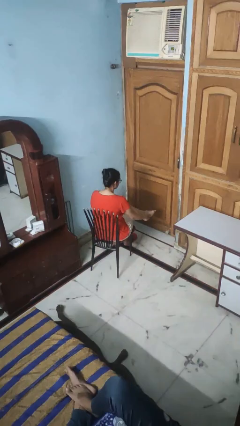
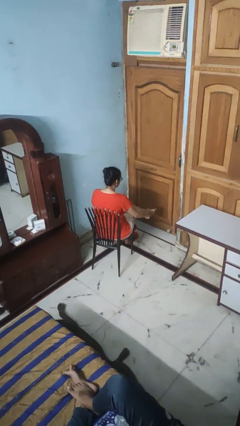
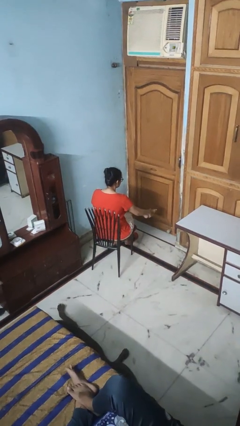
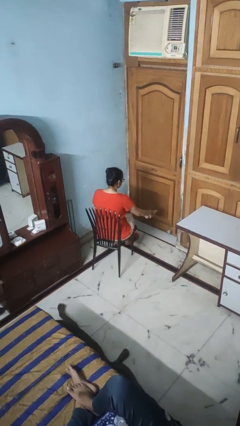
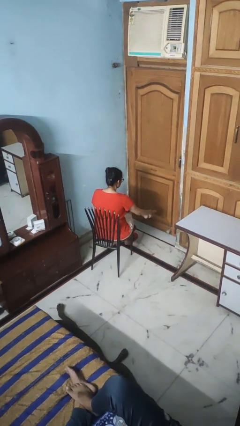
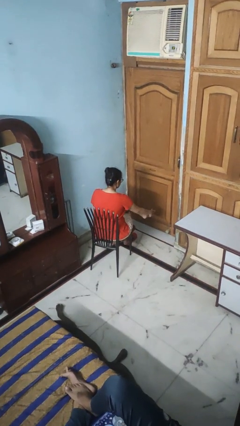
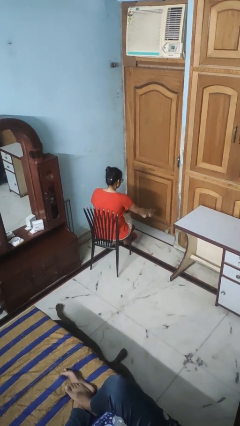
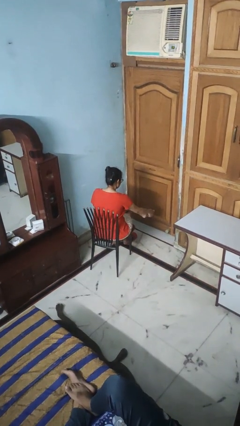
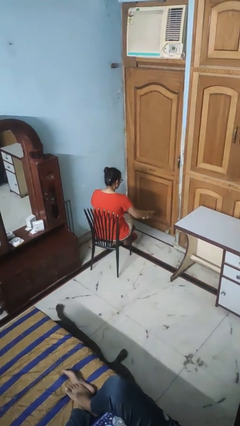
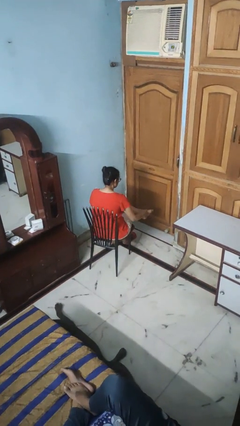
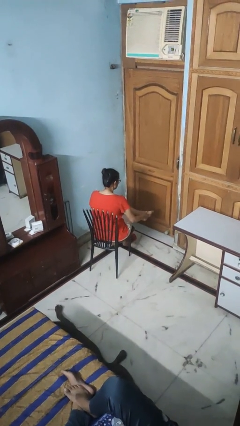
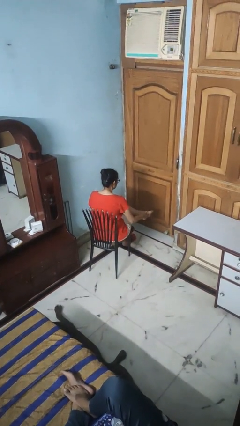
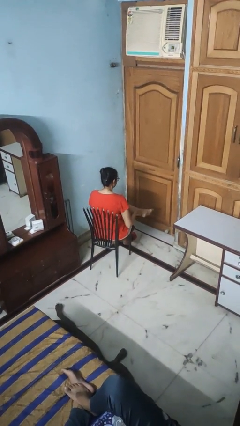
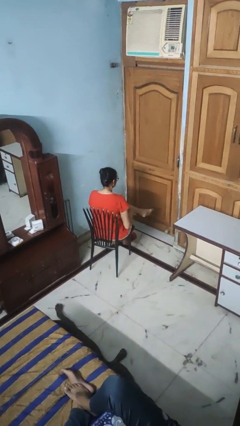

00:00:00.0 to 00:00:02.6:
person rubs foot

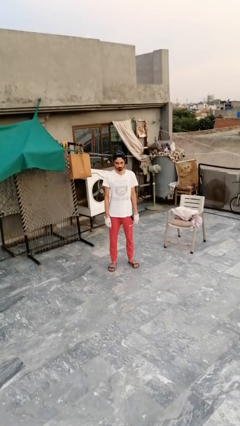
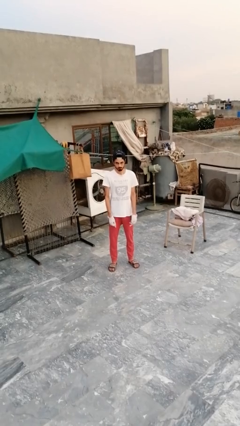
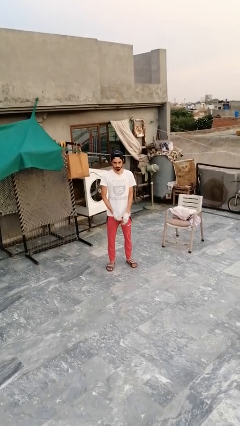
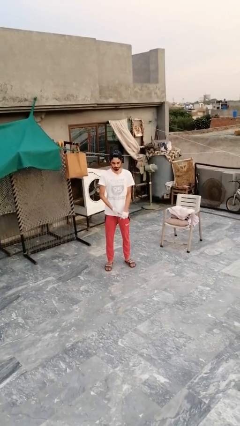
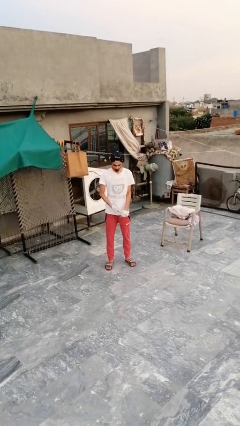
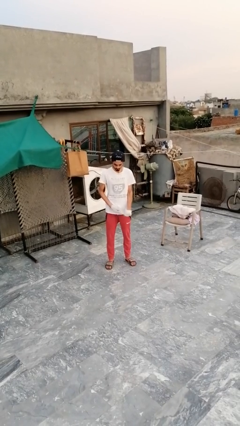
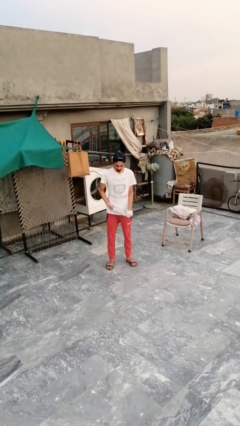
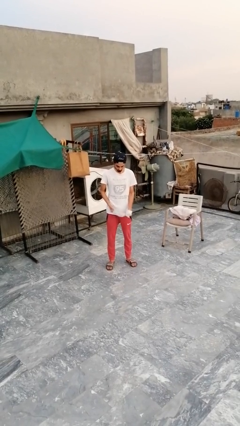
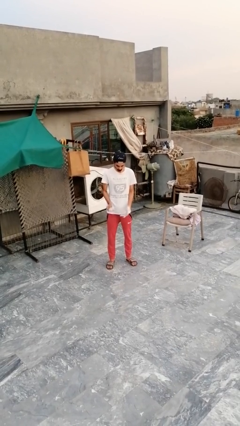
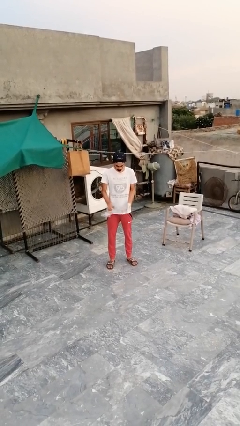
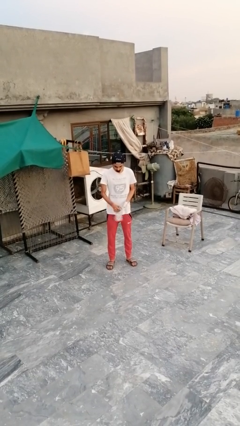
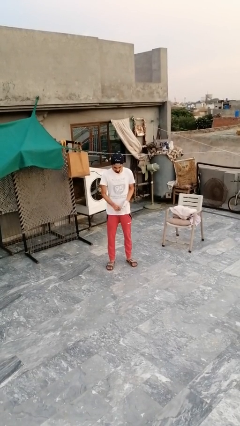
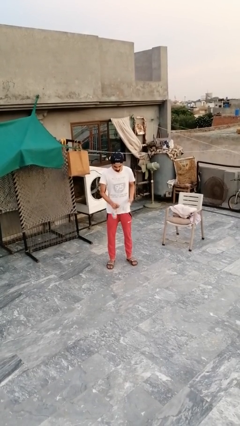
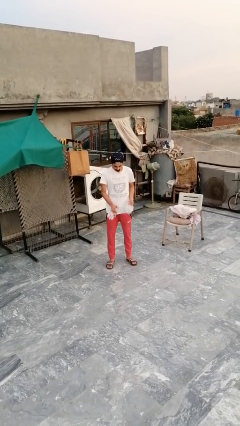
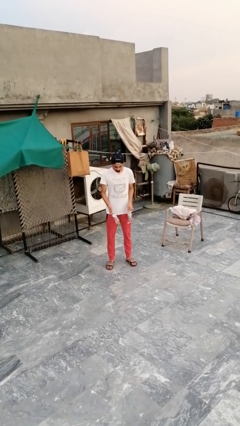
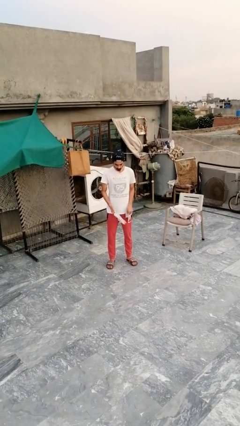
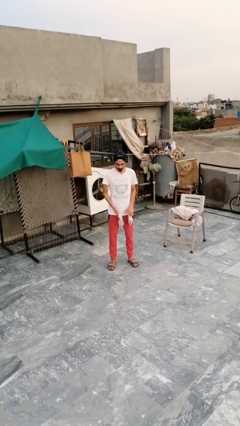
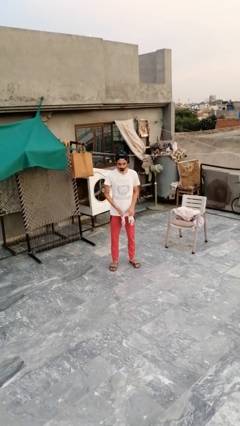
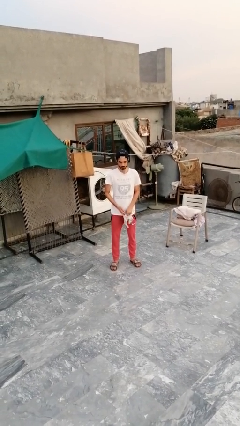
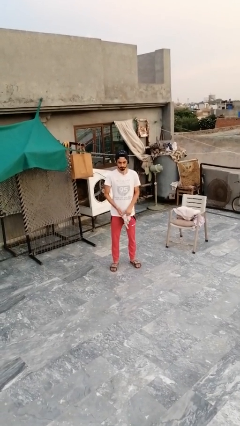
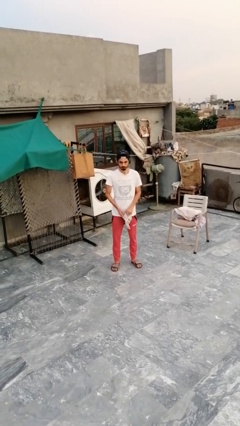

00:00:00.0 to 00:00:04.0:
person takes off gloves

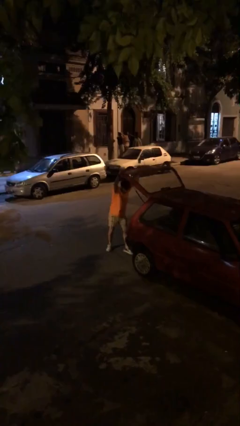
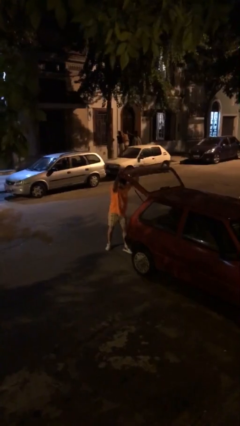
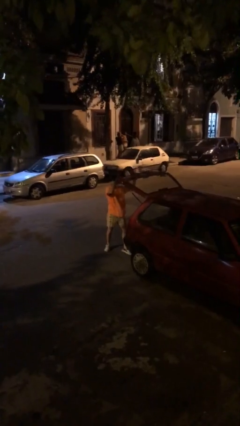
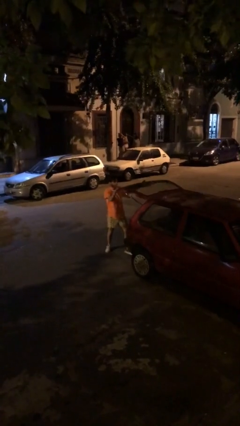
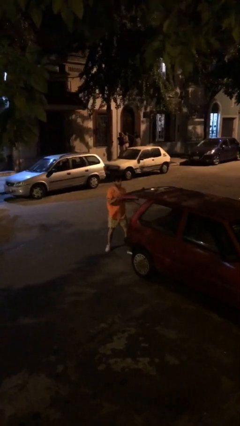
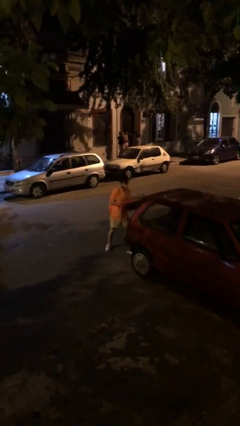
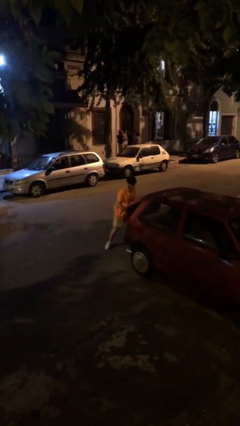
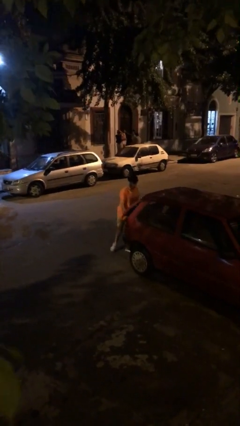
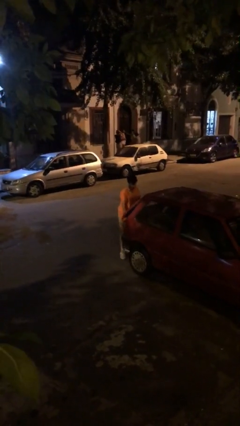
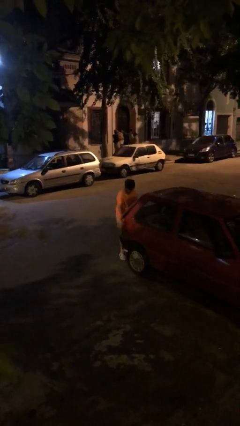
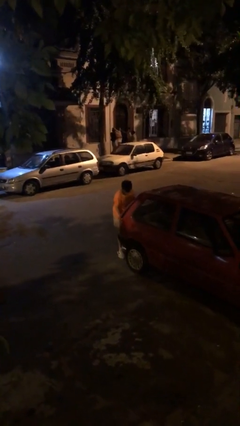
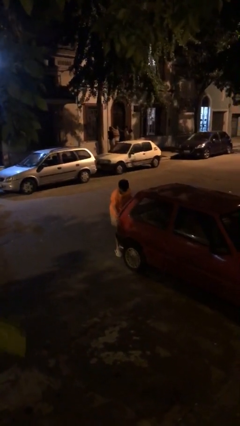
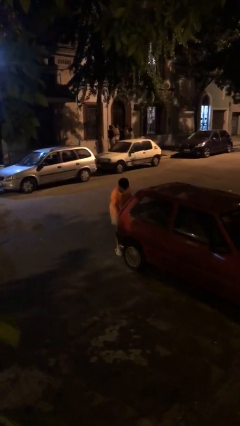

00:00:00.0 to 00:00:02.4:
person closes car trunk

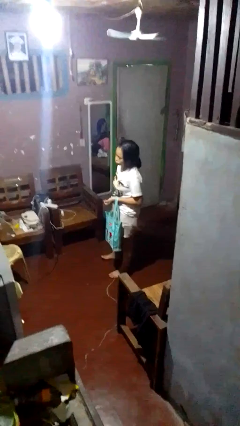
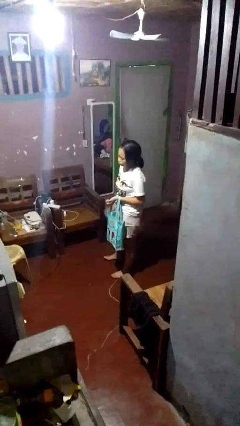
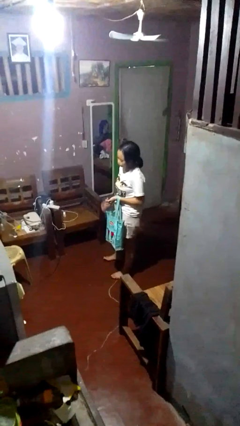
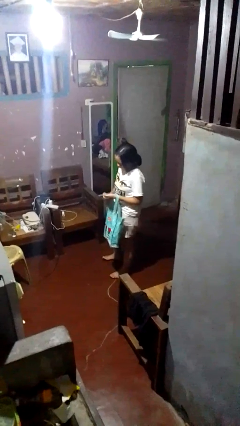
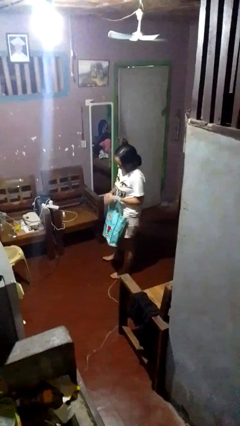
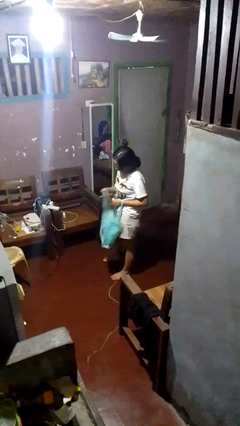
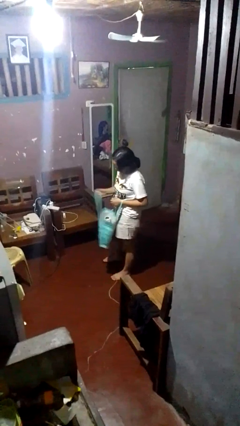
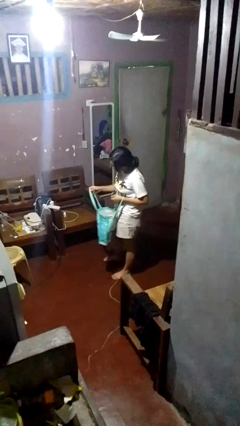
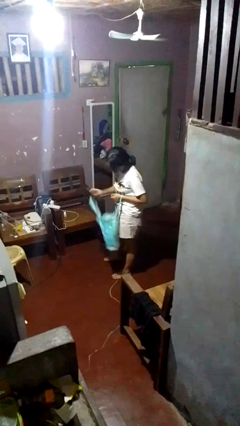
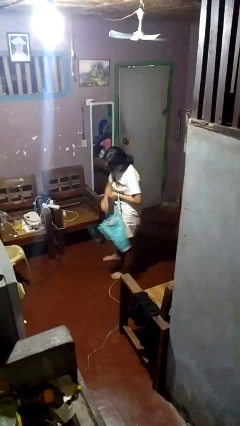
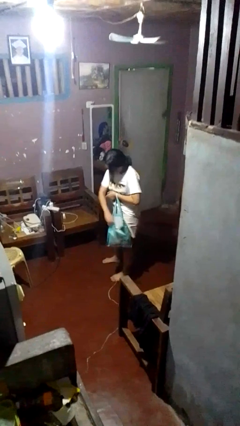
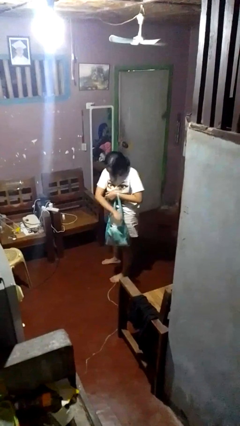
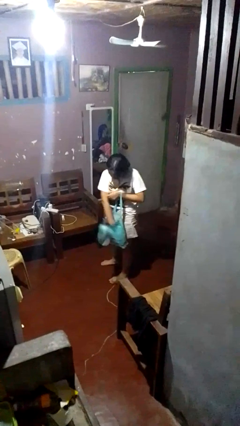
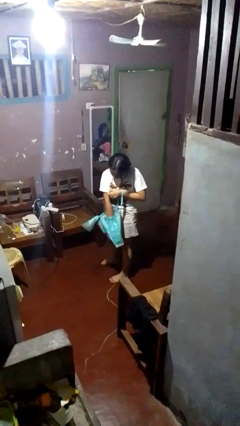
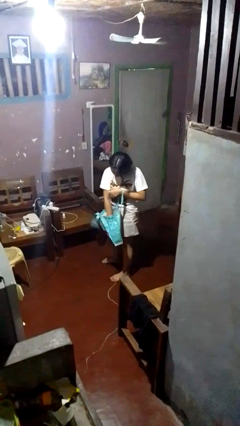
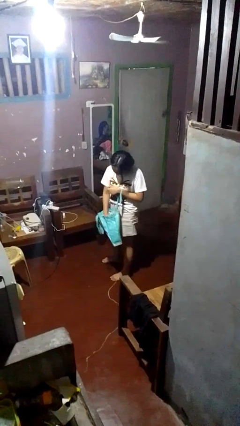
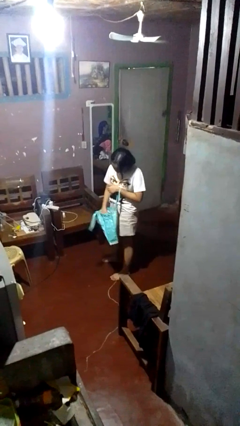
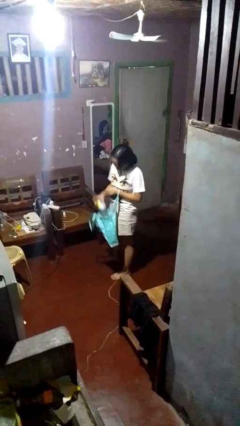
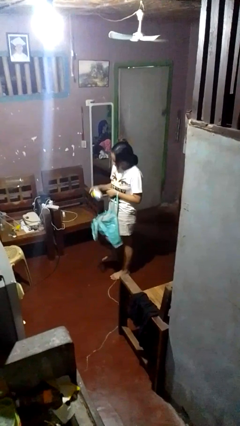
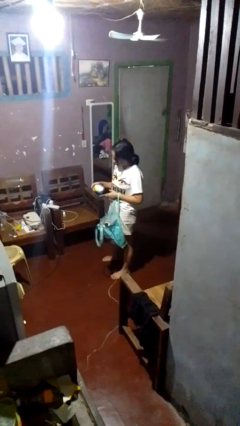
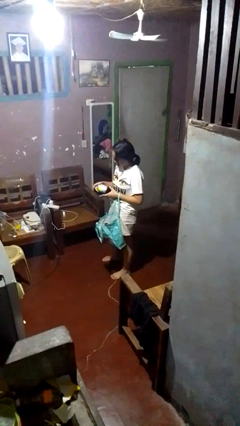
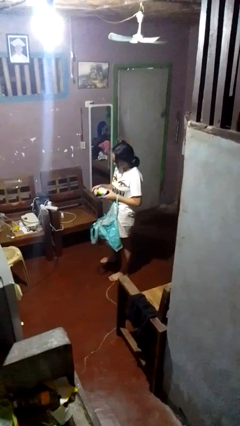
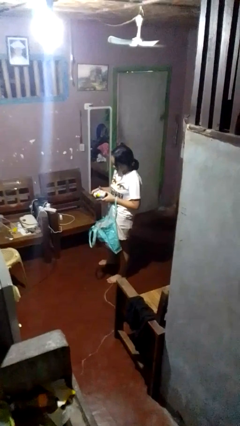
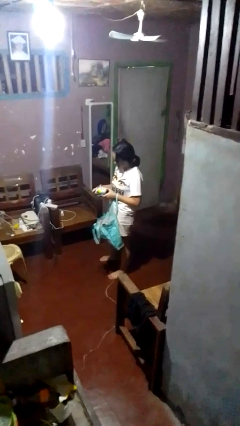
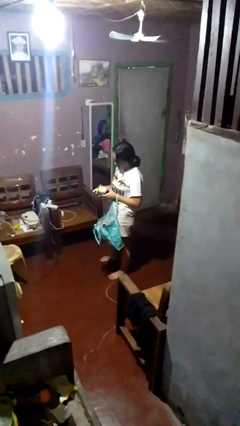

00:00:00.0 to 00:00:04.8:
person takes object from bag

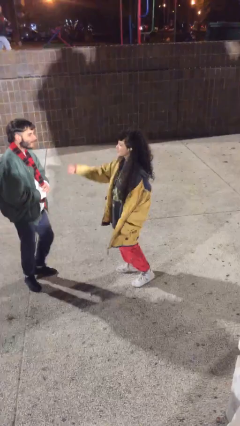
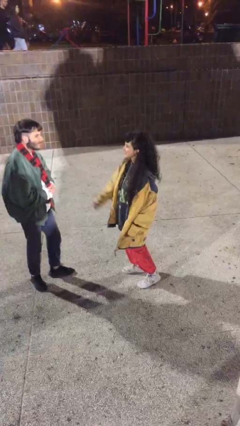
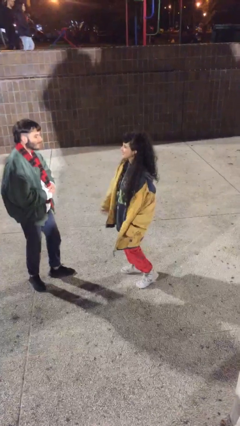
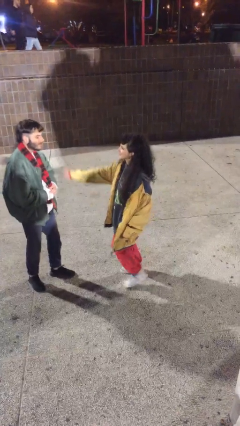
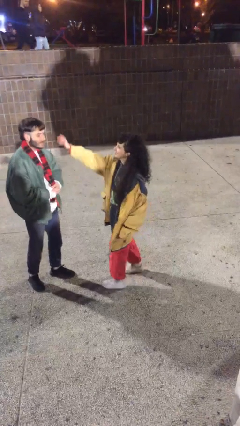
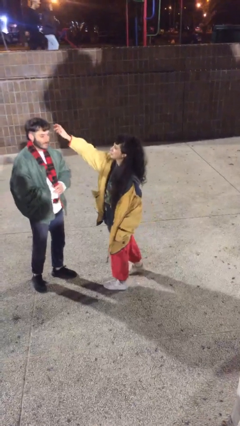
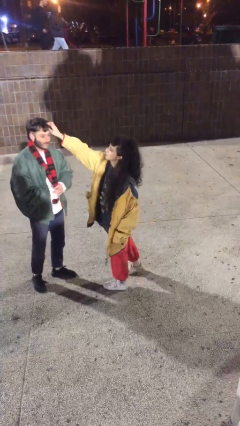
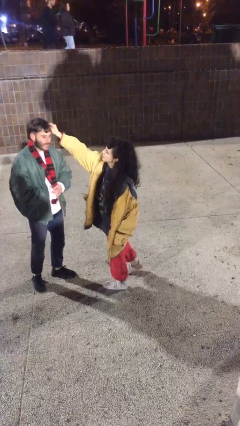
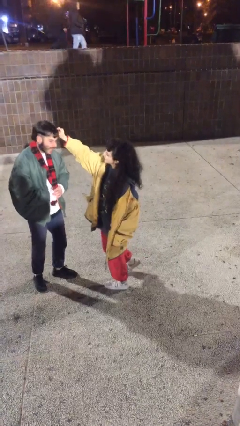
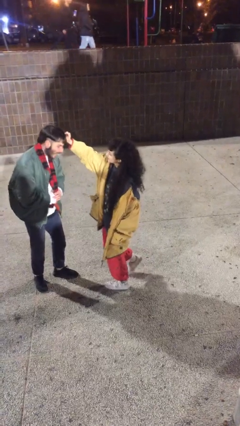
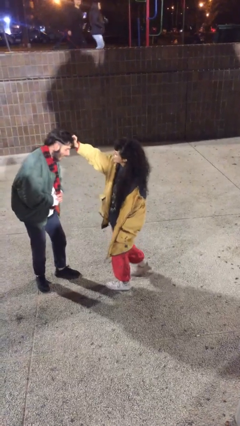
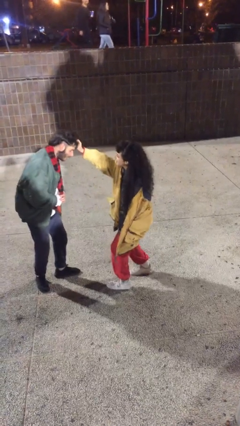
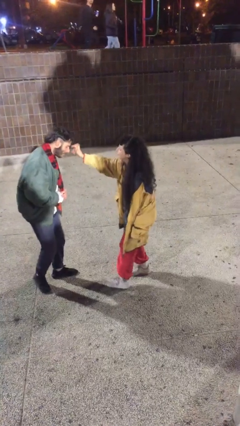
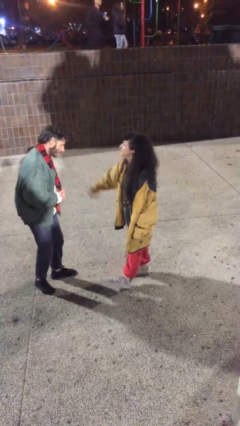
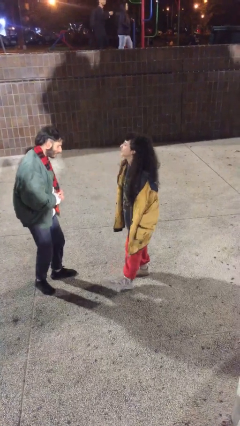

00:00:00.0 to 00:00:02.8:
person grabs person by hair

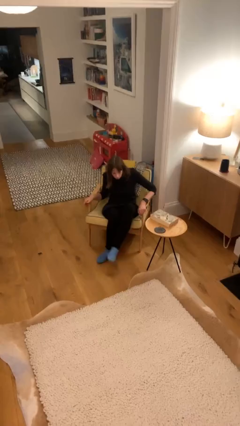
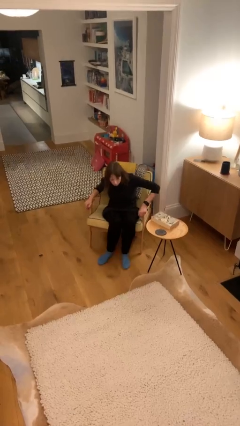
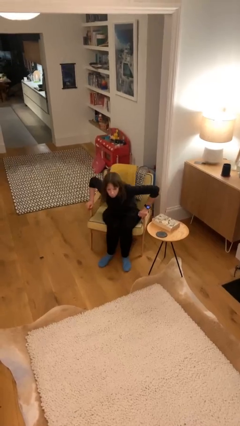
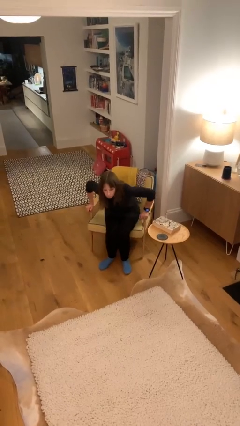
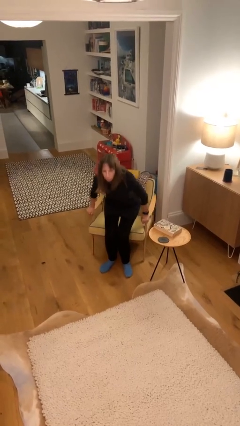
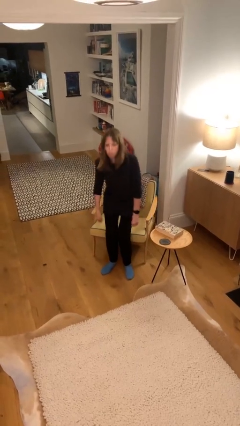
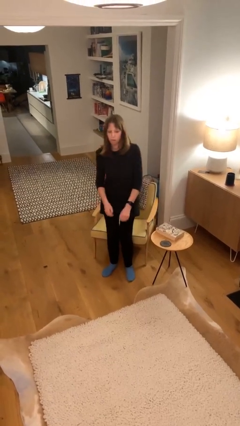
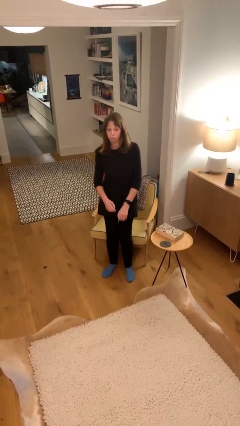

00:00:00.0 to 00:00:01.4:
person stands up
